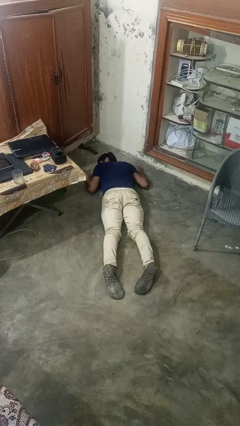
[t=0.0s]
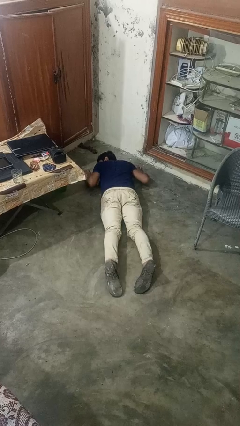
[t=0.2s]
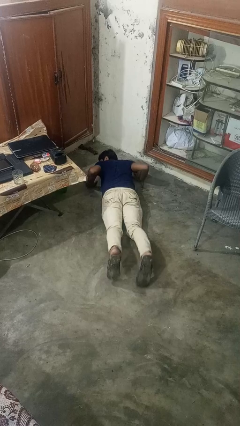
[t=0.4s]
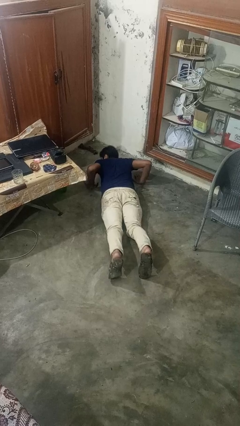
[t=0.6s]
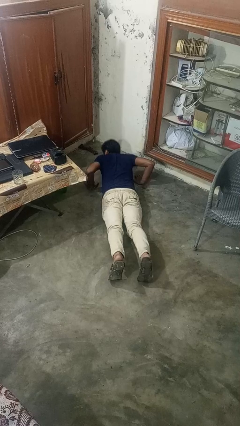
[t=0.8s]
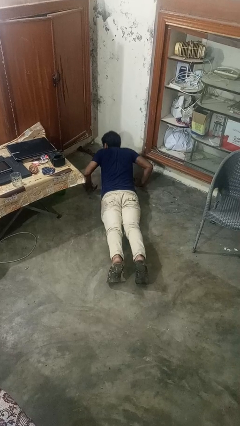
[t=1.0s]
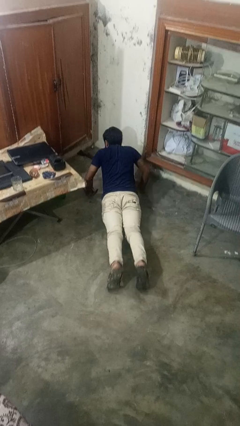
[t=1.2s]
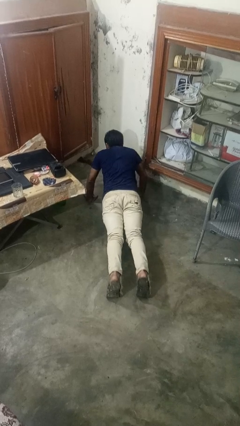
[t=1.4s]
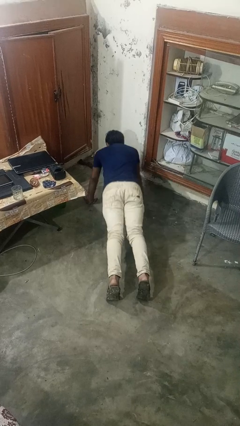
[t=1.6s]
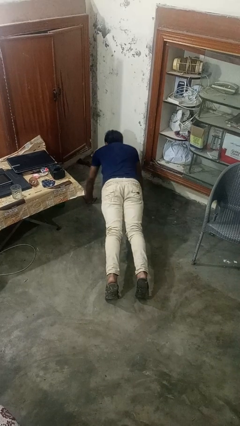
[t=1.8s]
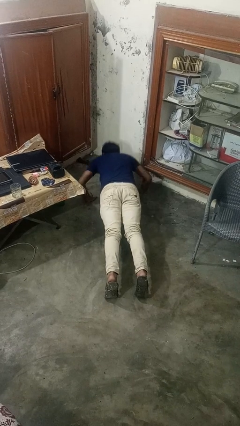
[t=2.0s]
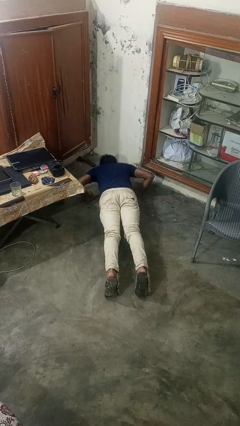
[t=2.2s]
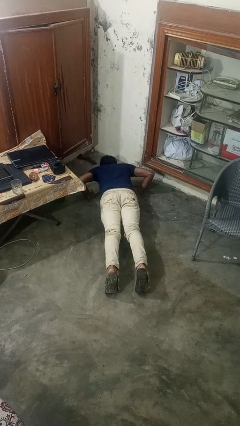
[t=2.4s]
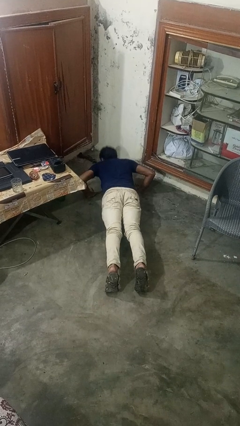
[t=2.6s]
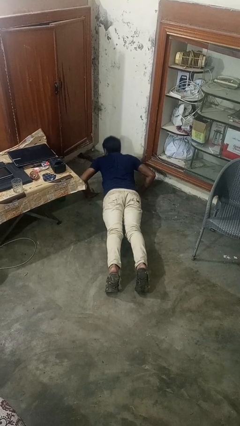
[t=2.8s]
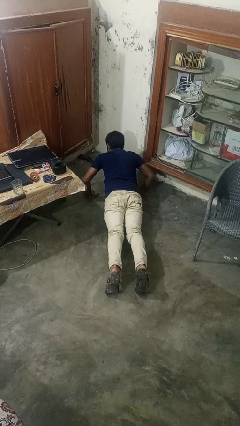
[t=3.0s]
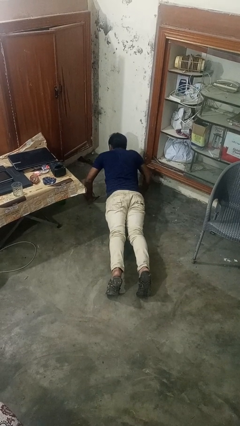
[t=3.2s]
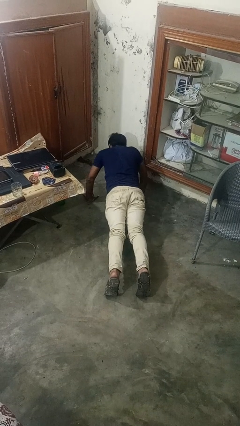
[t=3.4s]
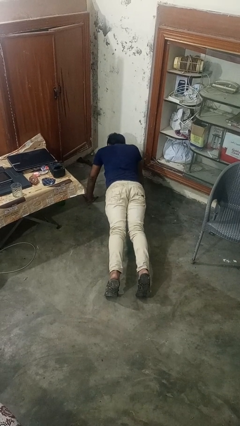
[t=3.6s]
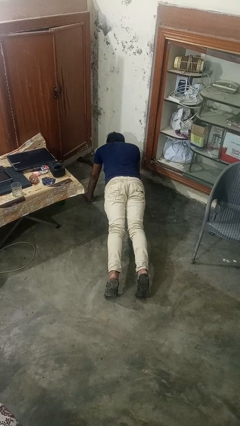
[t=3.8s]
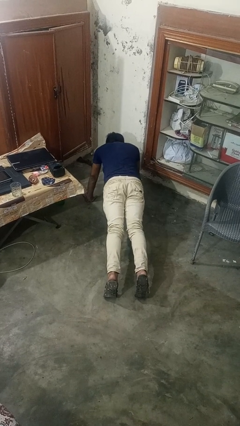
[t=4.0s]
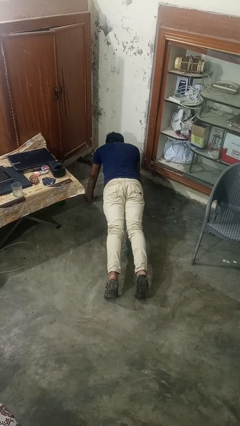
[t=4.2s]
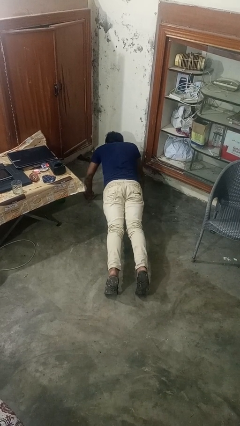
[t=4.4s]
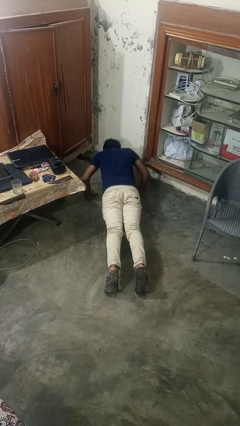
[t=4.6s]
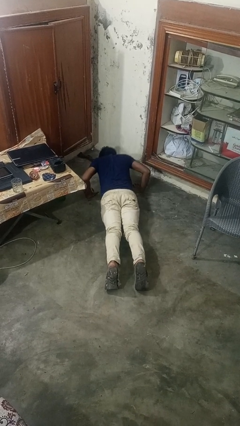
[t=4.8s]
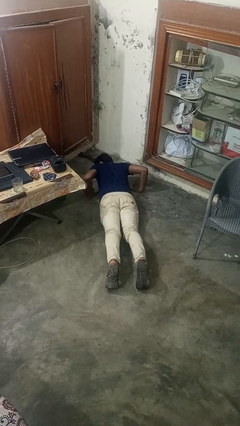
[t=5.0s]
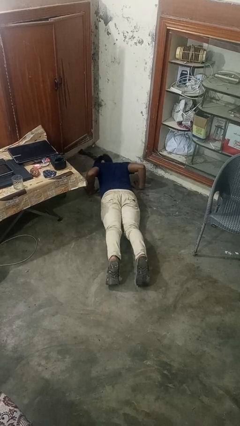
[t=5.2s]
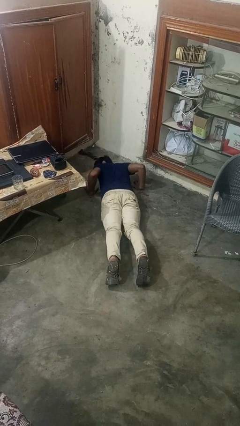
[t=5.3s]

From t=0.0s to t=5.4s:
person exercises with pushup

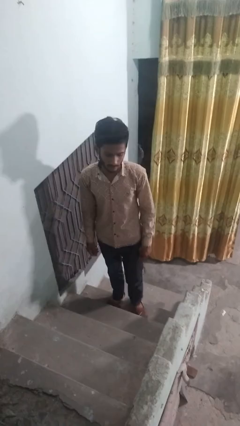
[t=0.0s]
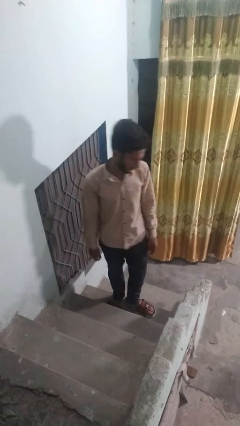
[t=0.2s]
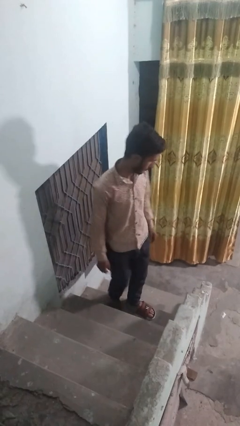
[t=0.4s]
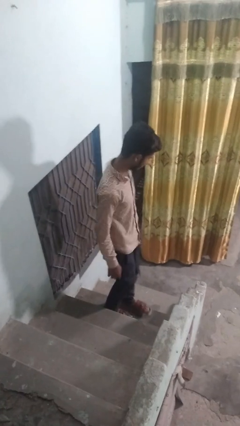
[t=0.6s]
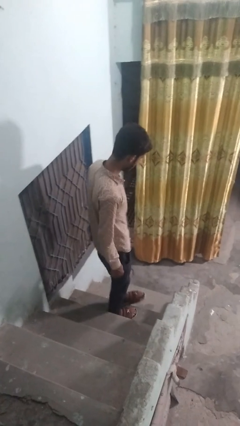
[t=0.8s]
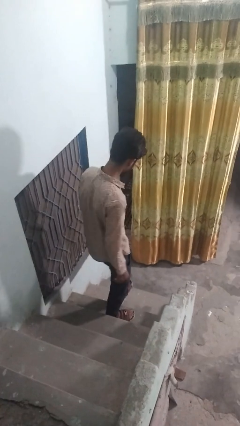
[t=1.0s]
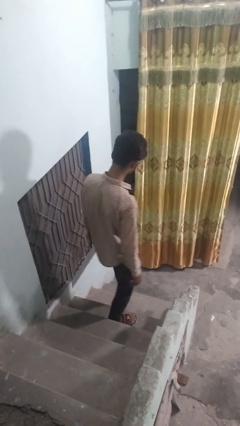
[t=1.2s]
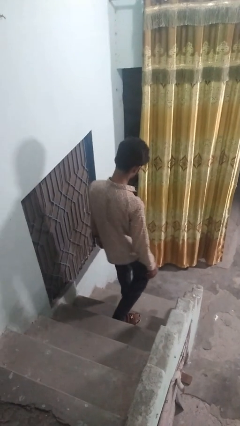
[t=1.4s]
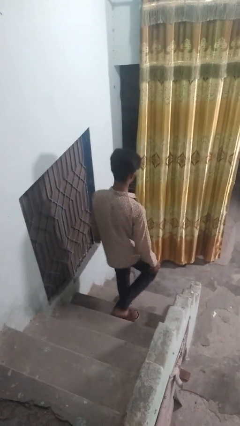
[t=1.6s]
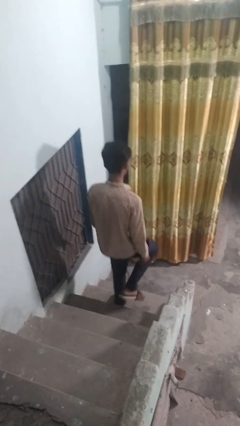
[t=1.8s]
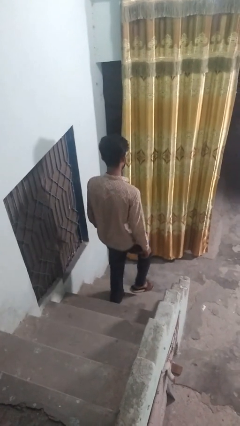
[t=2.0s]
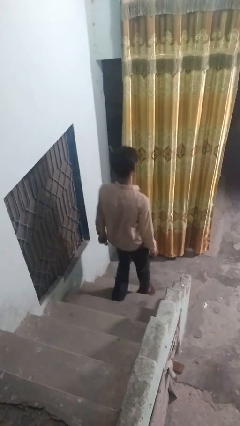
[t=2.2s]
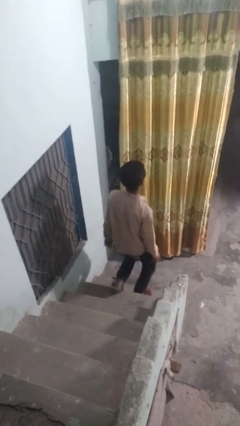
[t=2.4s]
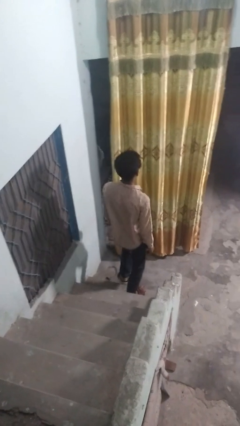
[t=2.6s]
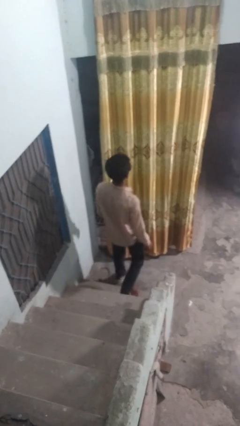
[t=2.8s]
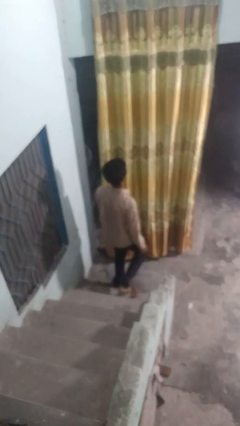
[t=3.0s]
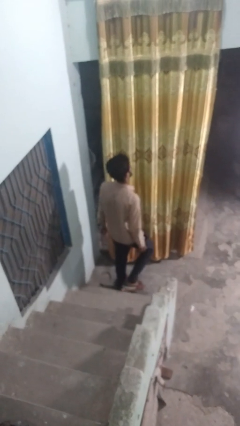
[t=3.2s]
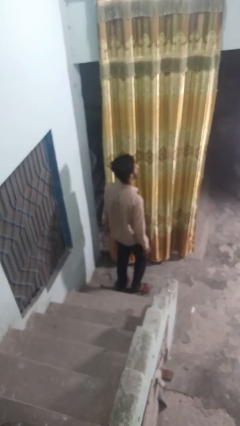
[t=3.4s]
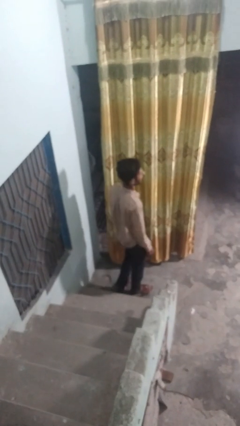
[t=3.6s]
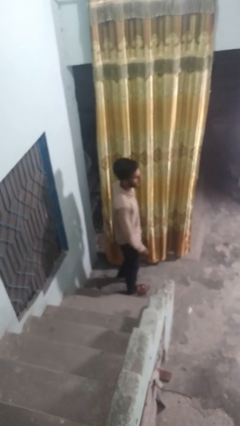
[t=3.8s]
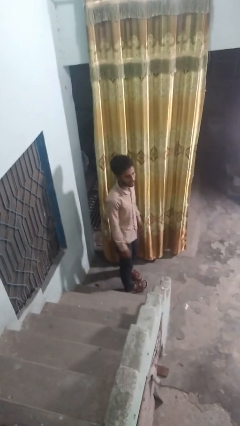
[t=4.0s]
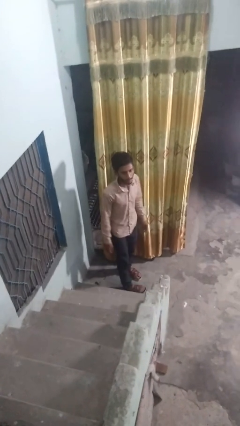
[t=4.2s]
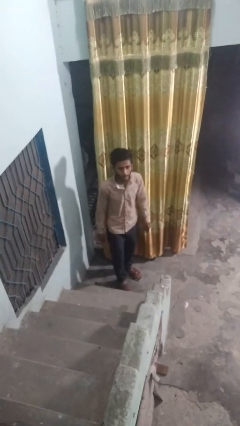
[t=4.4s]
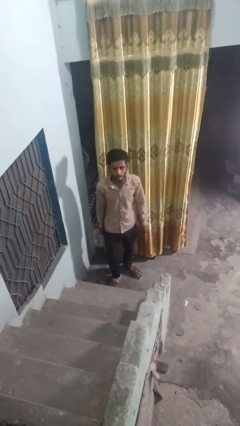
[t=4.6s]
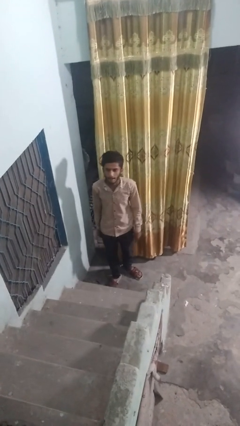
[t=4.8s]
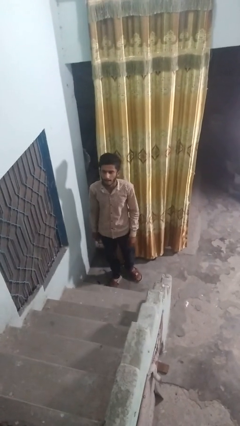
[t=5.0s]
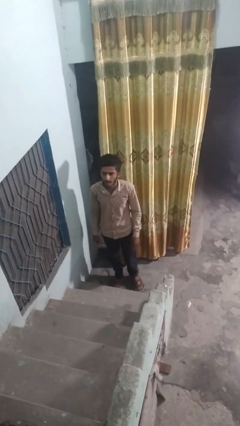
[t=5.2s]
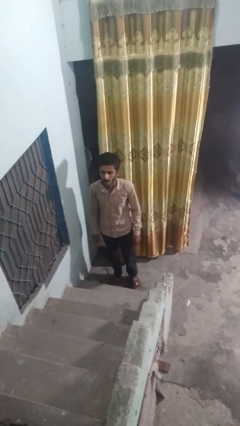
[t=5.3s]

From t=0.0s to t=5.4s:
person climbs down stairs

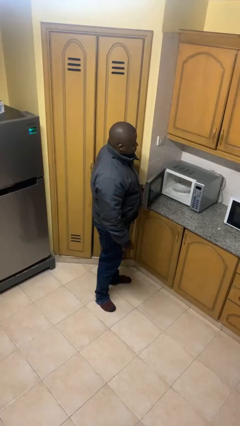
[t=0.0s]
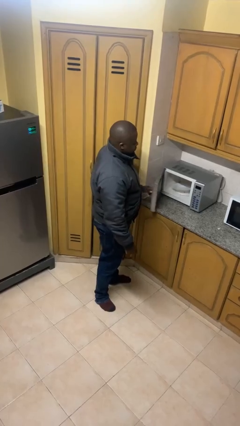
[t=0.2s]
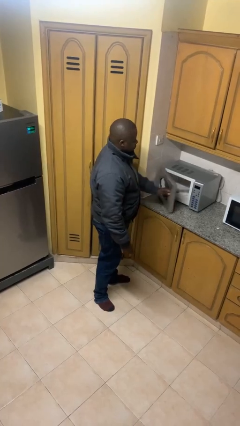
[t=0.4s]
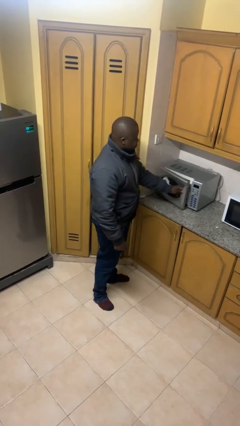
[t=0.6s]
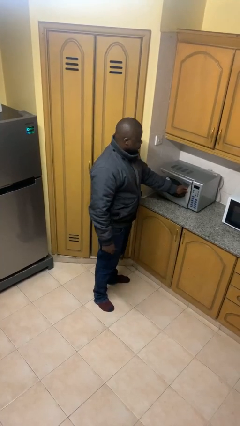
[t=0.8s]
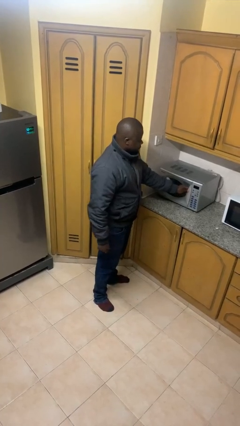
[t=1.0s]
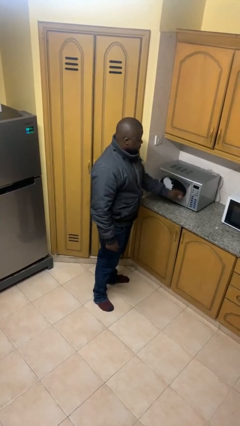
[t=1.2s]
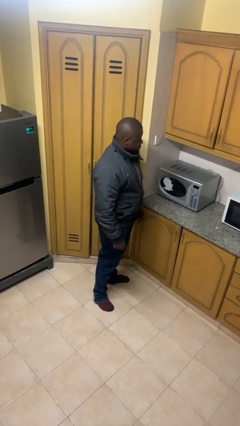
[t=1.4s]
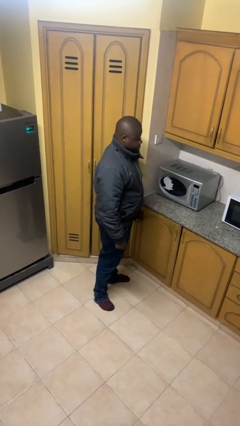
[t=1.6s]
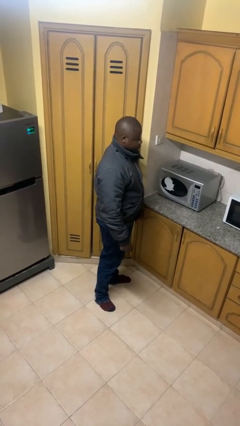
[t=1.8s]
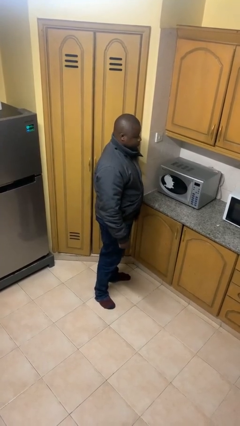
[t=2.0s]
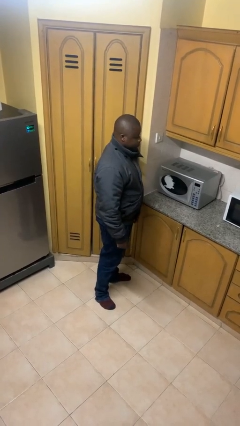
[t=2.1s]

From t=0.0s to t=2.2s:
person closes microwave

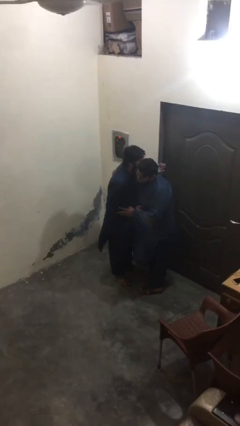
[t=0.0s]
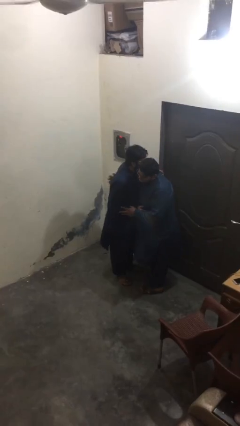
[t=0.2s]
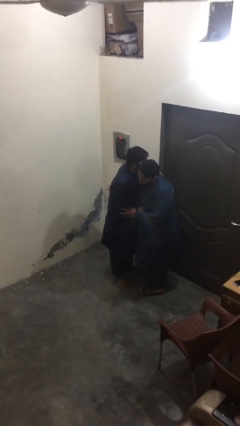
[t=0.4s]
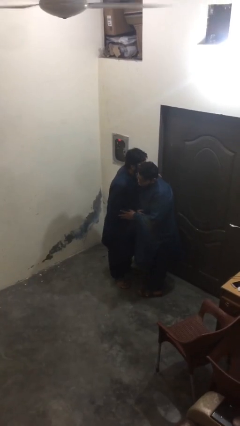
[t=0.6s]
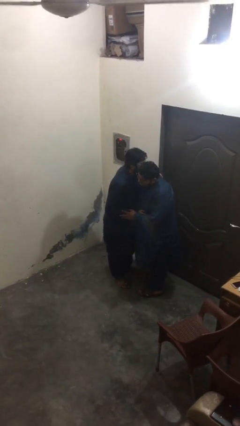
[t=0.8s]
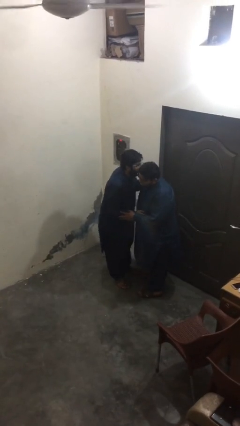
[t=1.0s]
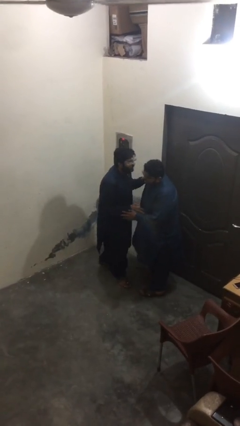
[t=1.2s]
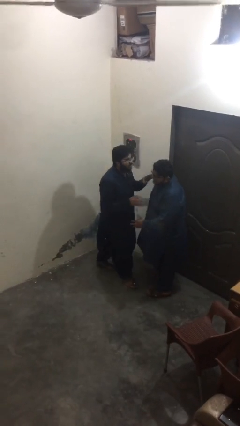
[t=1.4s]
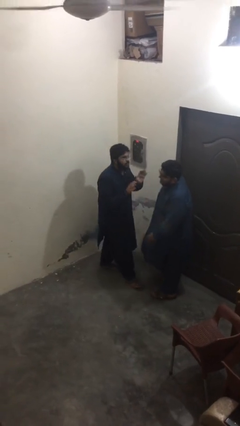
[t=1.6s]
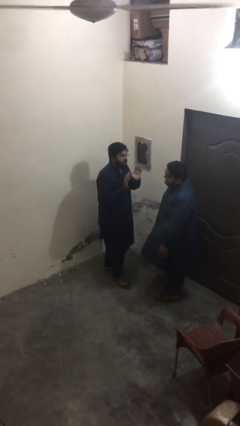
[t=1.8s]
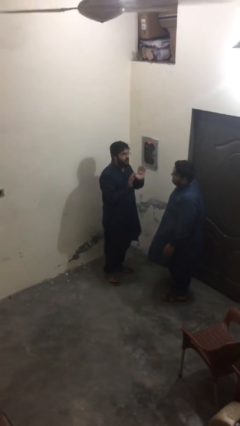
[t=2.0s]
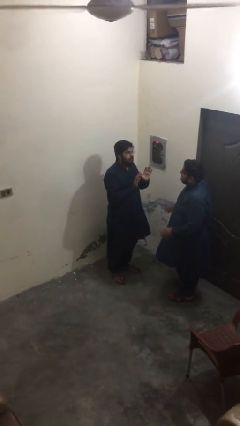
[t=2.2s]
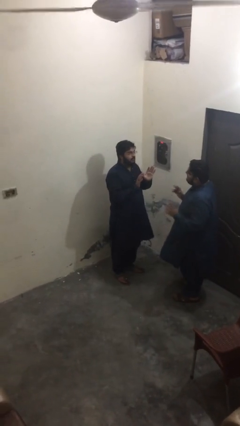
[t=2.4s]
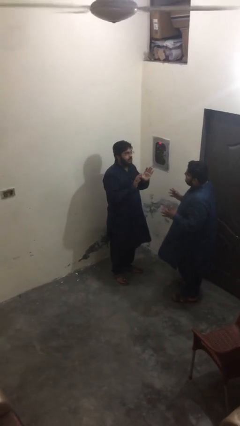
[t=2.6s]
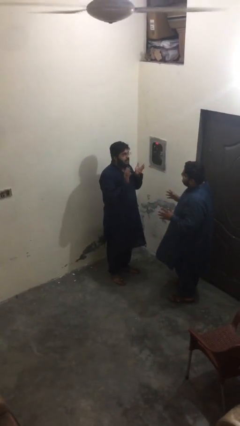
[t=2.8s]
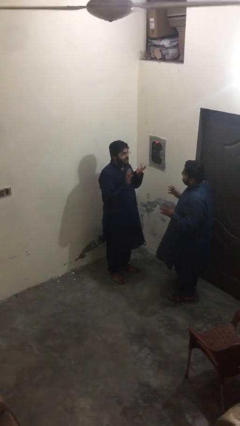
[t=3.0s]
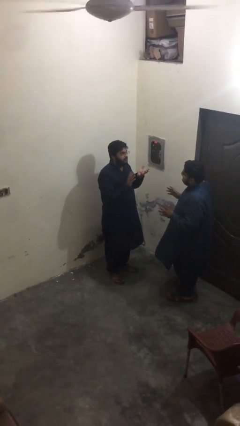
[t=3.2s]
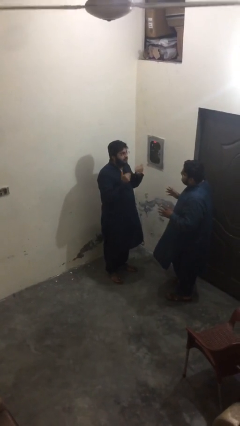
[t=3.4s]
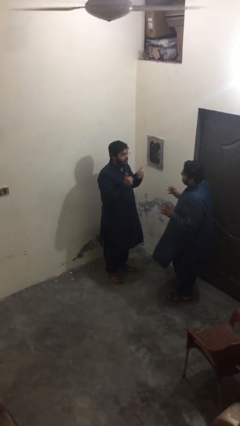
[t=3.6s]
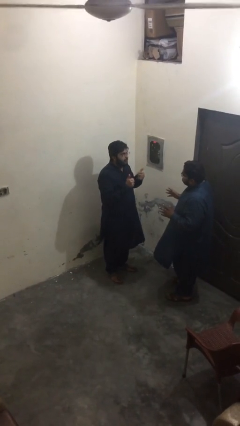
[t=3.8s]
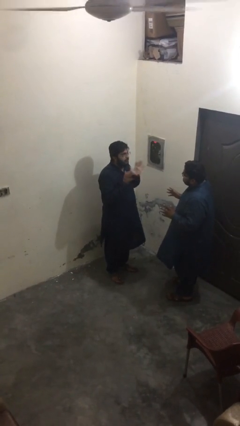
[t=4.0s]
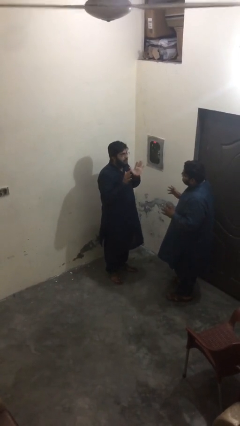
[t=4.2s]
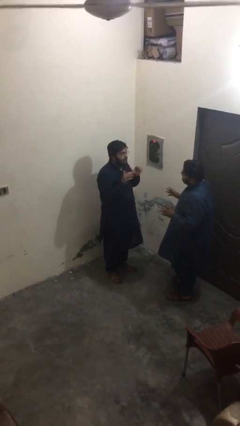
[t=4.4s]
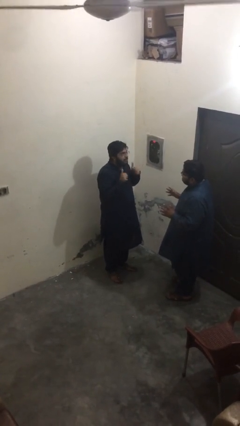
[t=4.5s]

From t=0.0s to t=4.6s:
person talks to person

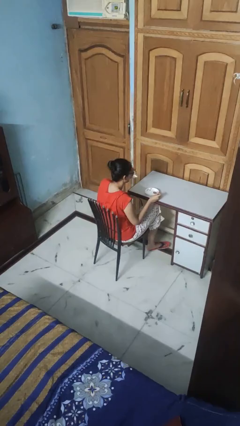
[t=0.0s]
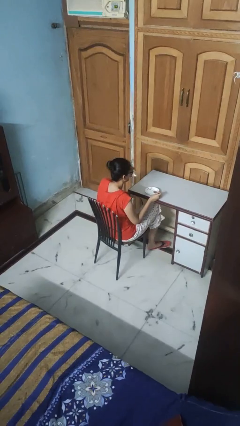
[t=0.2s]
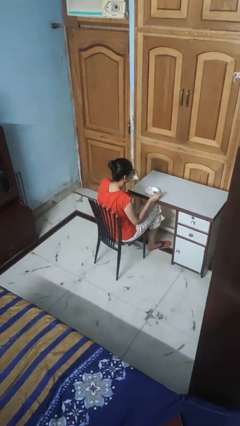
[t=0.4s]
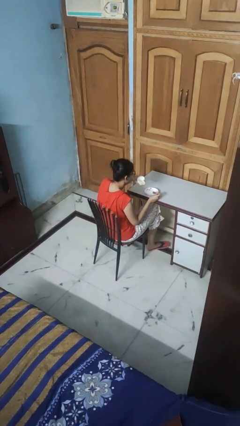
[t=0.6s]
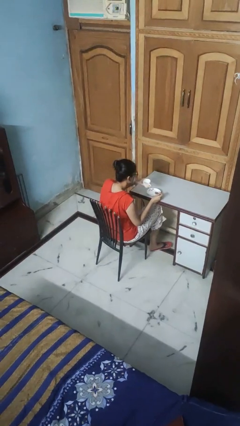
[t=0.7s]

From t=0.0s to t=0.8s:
person drinks from mug
